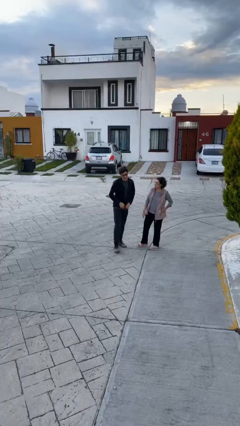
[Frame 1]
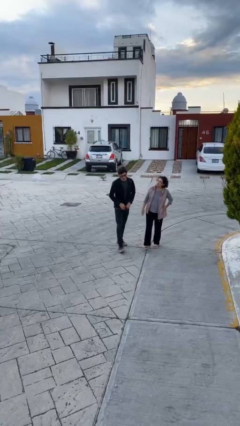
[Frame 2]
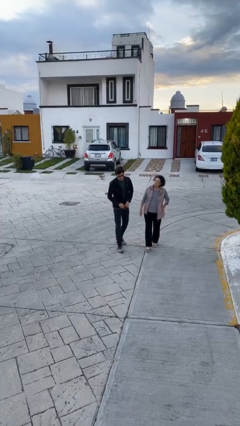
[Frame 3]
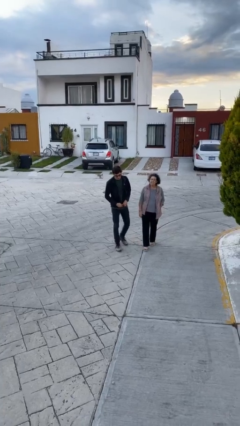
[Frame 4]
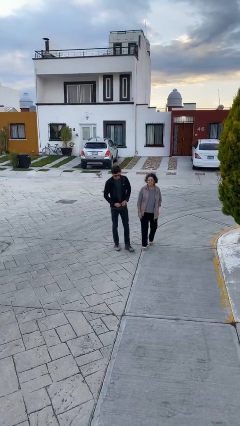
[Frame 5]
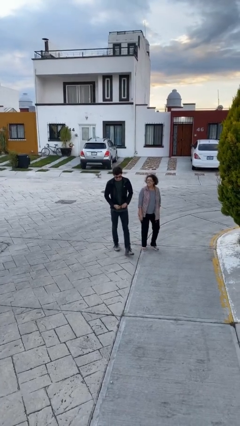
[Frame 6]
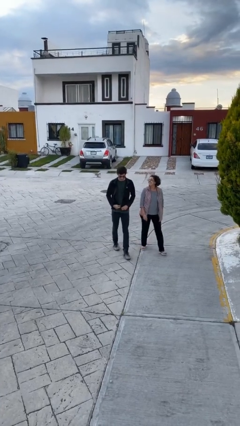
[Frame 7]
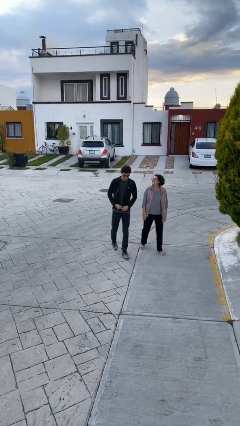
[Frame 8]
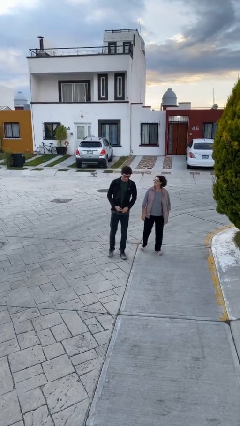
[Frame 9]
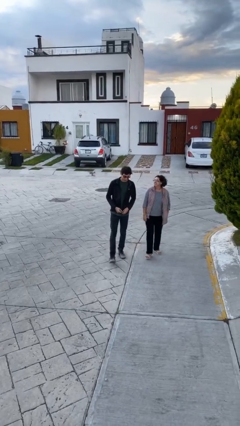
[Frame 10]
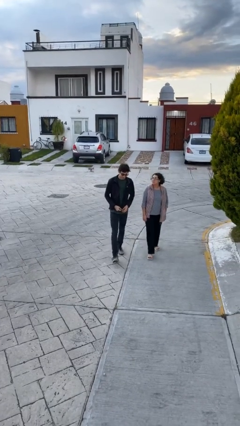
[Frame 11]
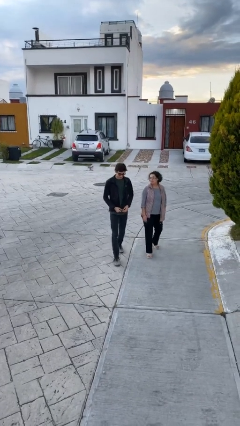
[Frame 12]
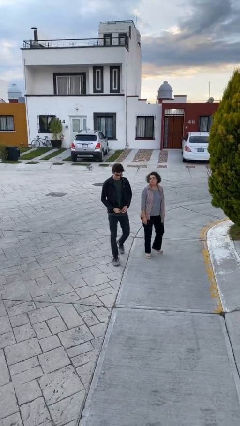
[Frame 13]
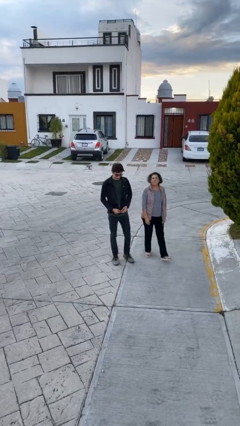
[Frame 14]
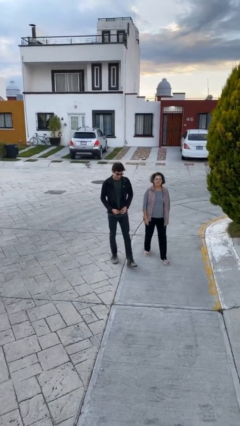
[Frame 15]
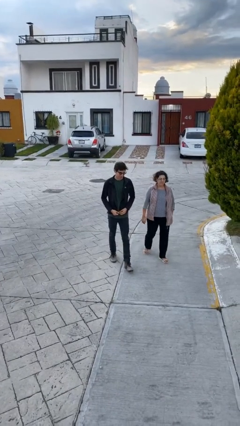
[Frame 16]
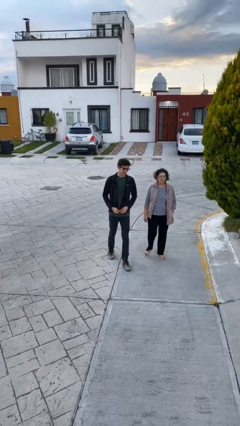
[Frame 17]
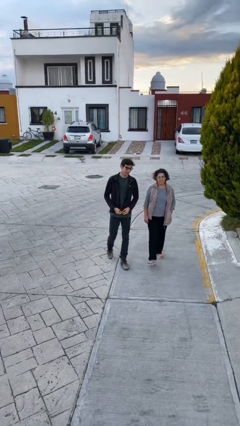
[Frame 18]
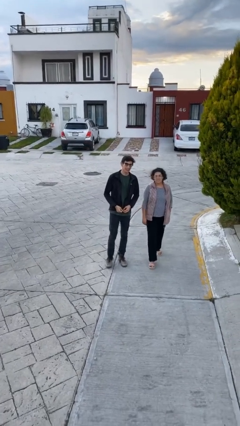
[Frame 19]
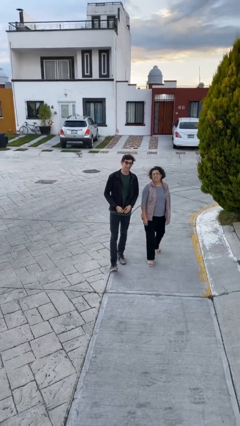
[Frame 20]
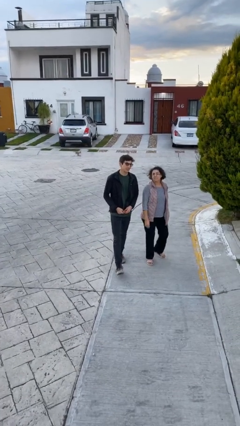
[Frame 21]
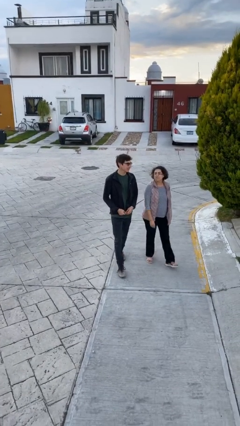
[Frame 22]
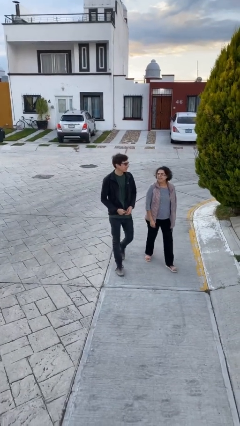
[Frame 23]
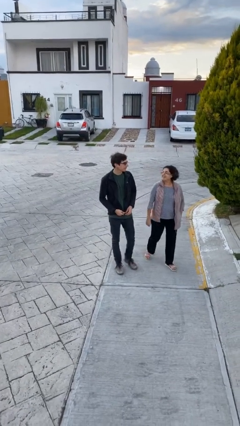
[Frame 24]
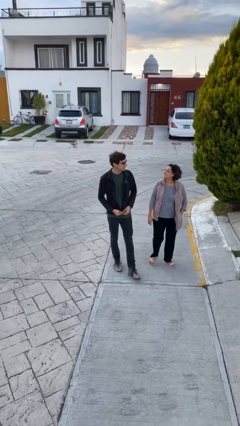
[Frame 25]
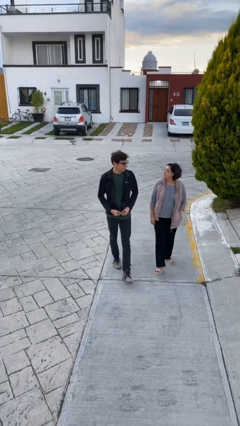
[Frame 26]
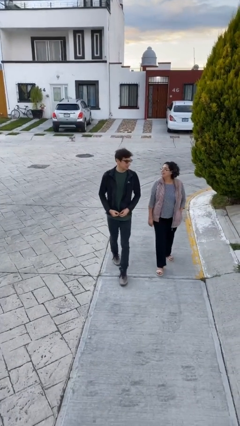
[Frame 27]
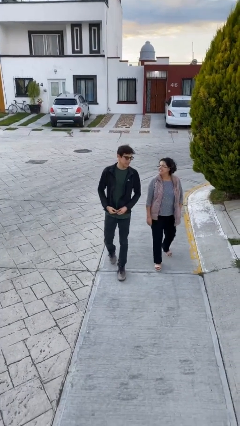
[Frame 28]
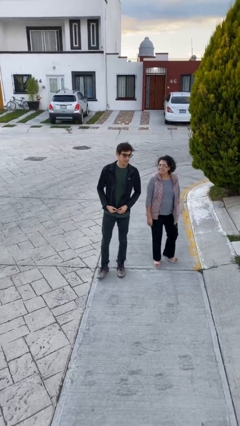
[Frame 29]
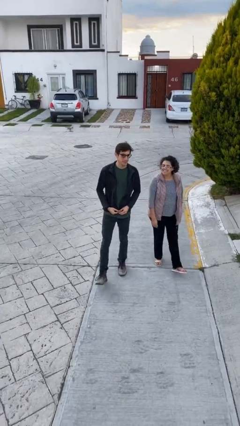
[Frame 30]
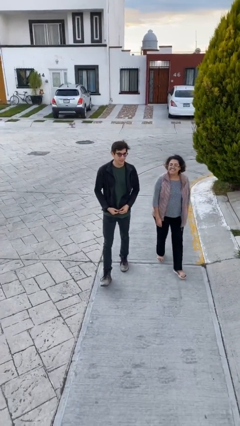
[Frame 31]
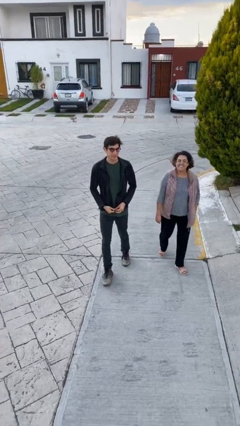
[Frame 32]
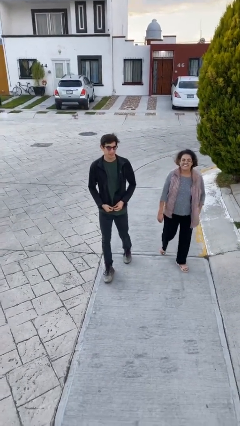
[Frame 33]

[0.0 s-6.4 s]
person talks to person

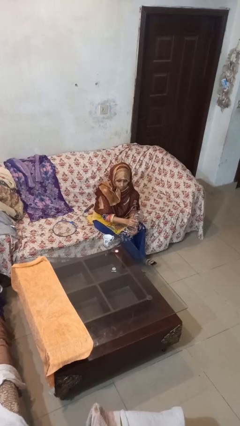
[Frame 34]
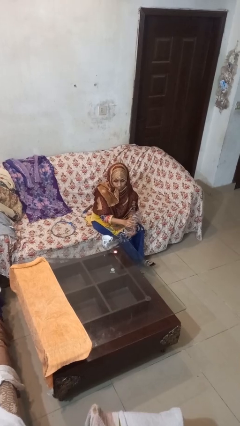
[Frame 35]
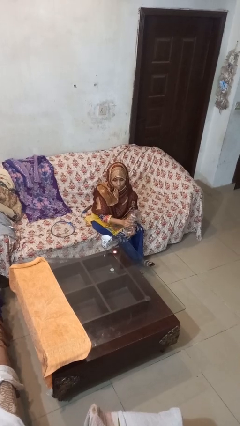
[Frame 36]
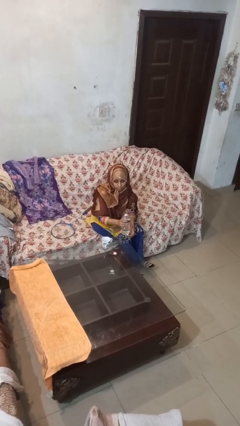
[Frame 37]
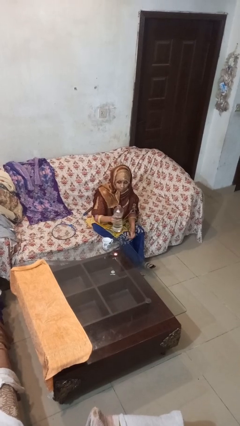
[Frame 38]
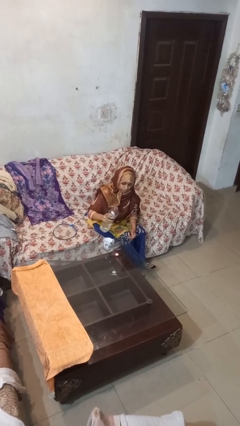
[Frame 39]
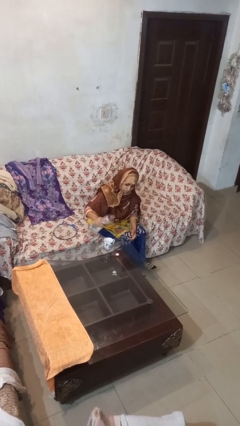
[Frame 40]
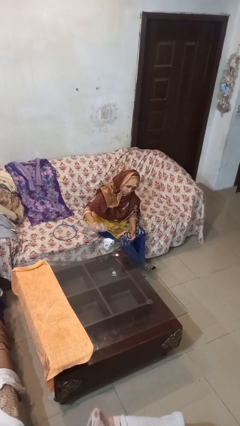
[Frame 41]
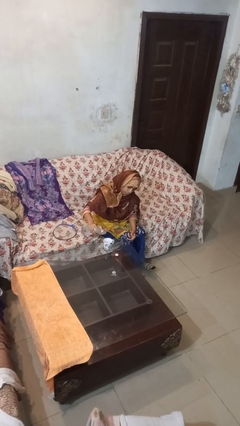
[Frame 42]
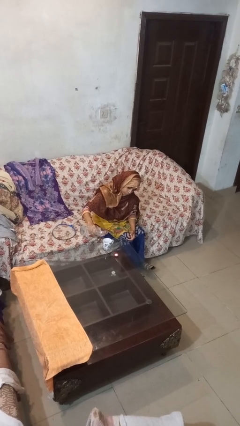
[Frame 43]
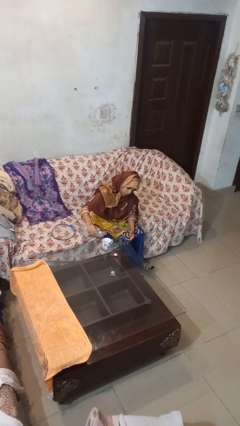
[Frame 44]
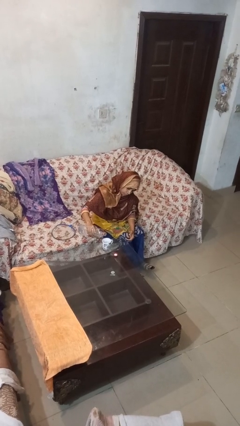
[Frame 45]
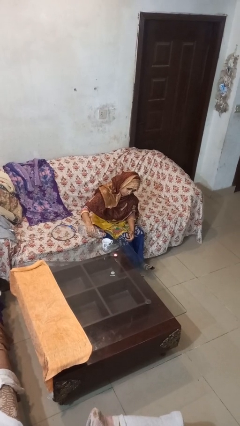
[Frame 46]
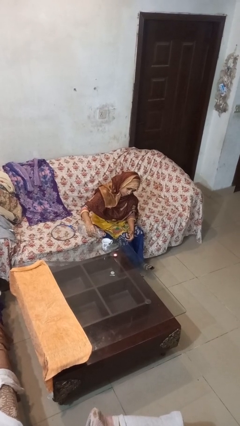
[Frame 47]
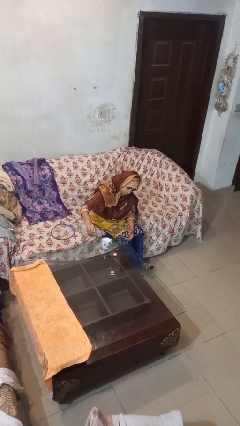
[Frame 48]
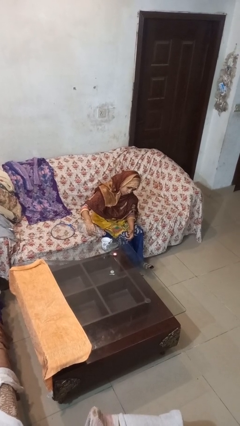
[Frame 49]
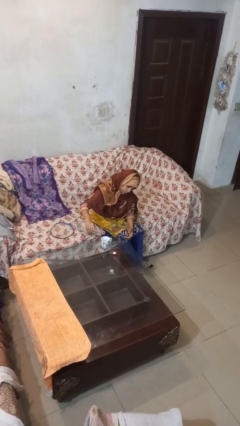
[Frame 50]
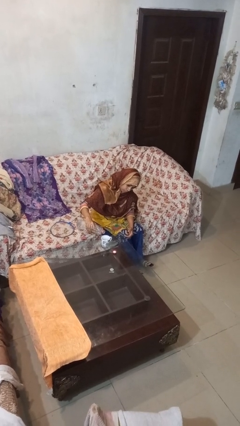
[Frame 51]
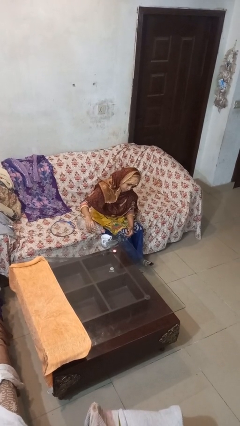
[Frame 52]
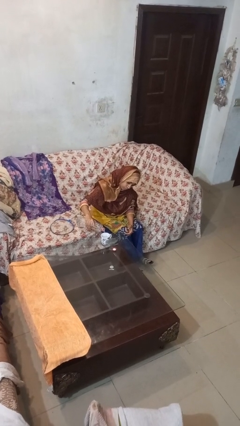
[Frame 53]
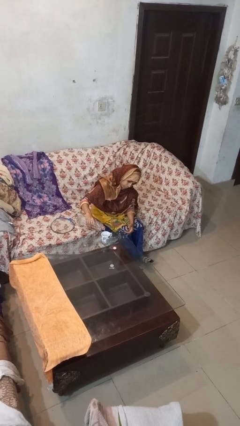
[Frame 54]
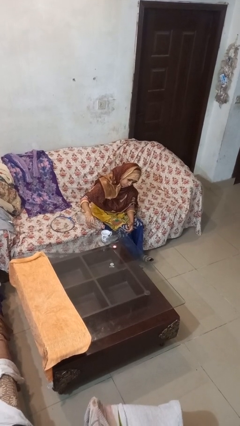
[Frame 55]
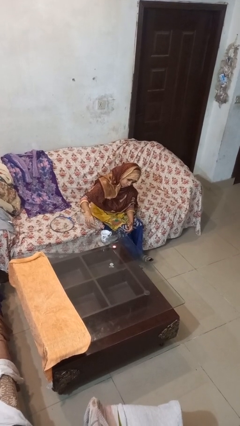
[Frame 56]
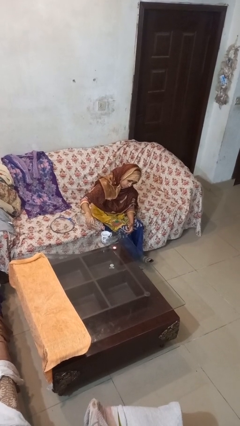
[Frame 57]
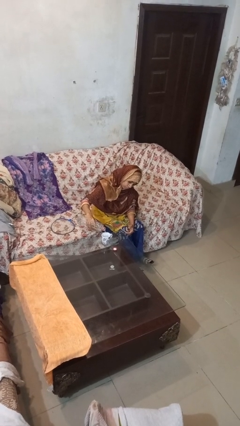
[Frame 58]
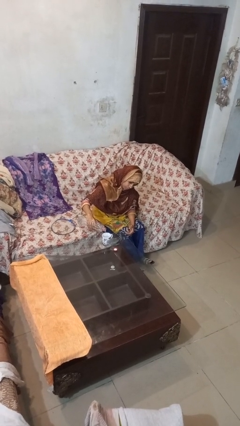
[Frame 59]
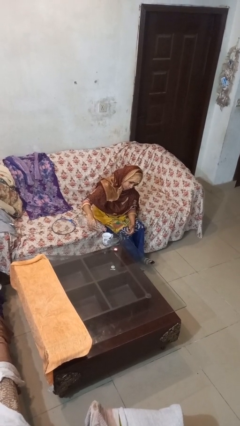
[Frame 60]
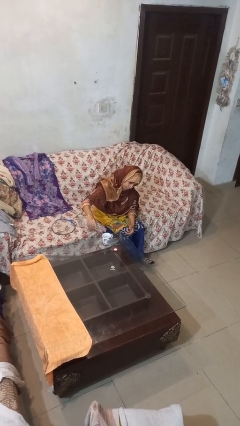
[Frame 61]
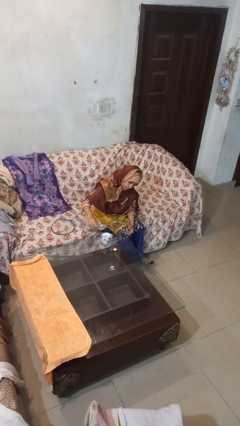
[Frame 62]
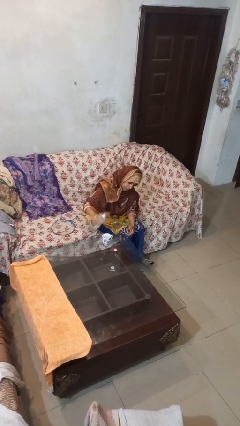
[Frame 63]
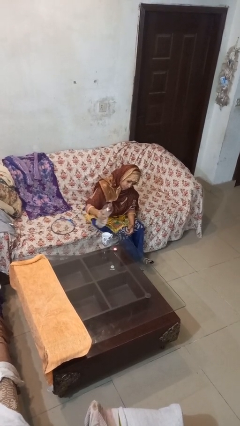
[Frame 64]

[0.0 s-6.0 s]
person pours liquid into cup

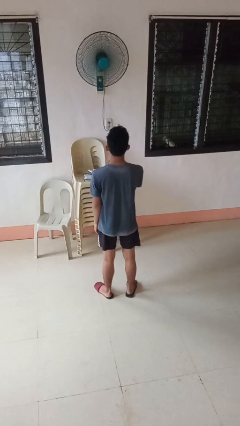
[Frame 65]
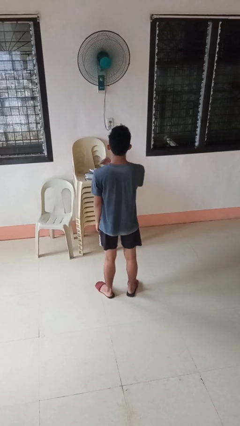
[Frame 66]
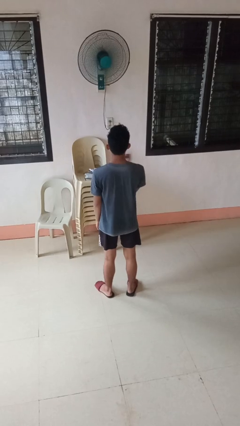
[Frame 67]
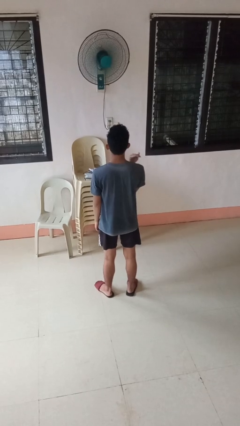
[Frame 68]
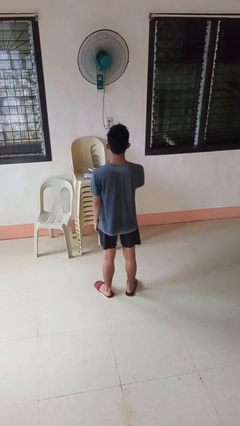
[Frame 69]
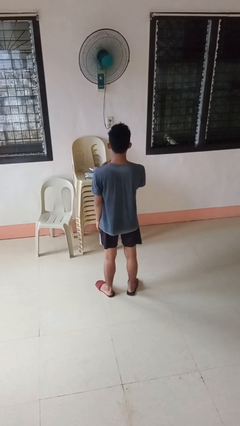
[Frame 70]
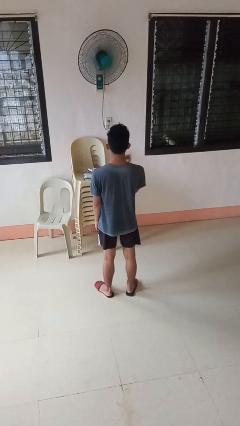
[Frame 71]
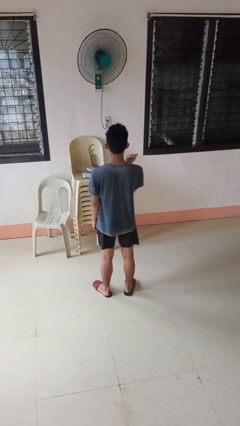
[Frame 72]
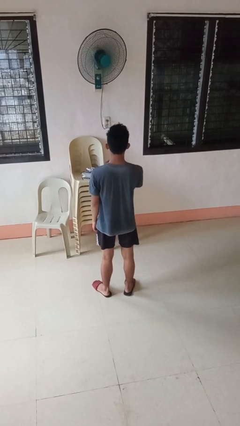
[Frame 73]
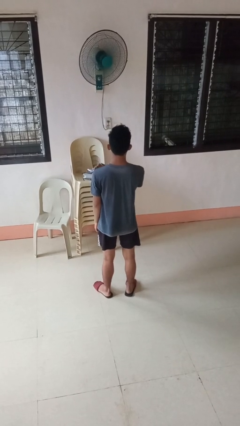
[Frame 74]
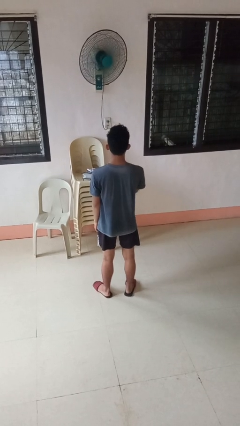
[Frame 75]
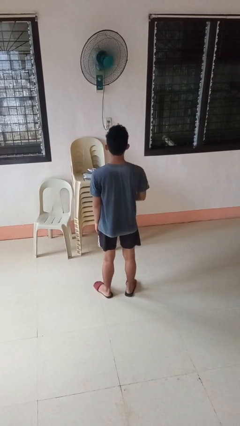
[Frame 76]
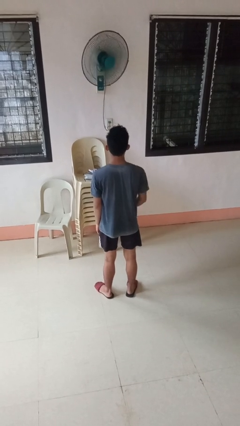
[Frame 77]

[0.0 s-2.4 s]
person gestures cut

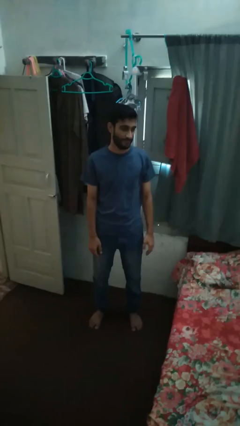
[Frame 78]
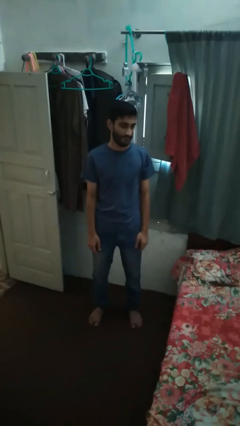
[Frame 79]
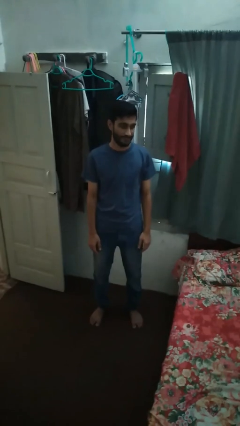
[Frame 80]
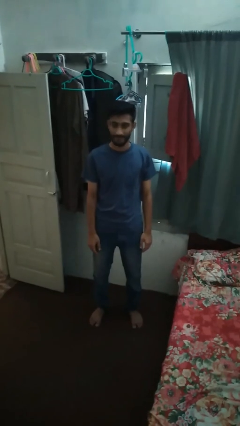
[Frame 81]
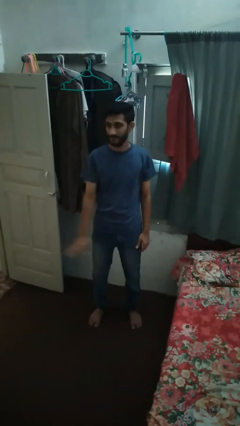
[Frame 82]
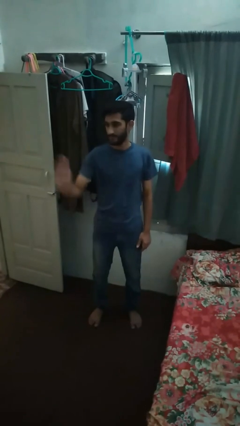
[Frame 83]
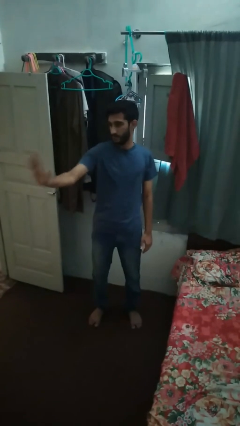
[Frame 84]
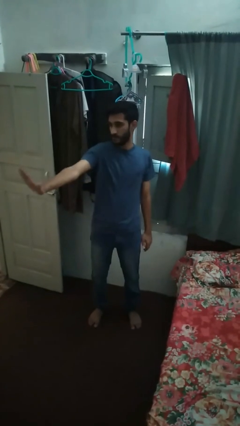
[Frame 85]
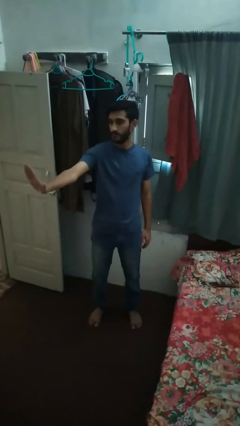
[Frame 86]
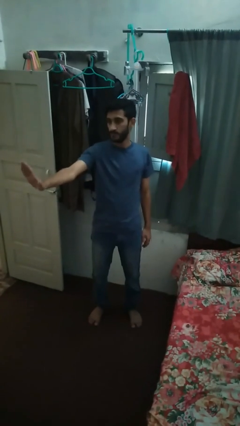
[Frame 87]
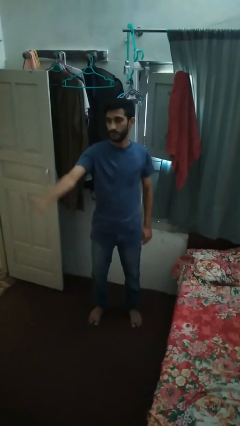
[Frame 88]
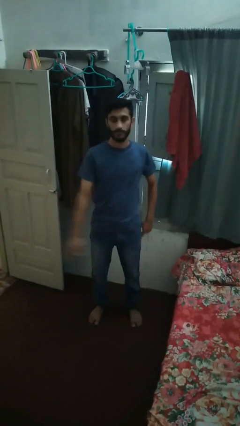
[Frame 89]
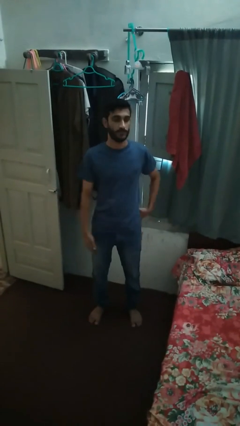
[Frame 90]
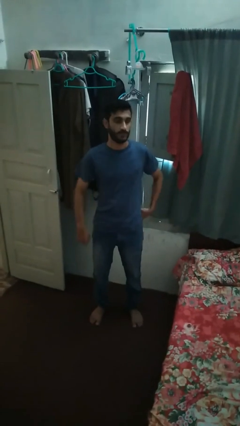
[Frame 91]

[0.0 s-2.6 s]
person gestures stop

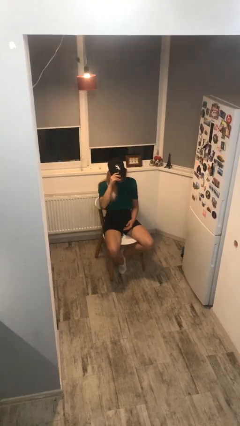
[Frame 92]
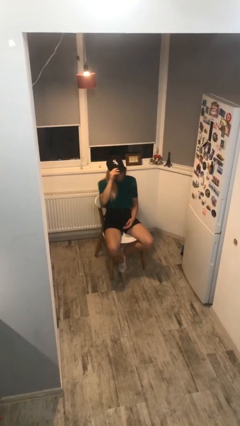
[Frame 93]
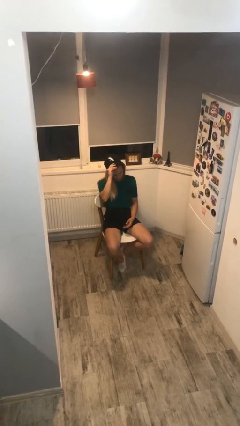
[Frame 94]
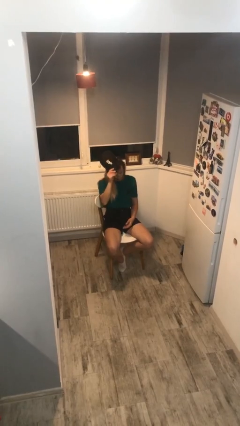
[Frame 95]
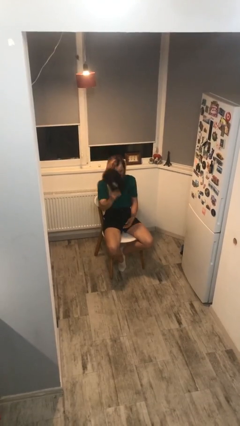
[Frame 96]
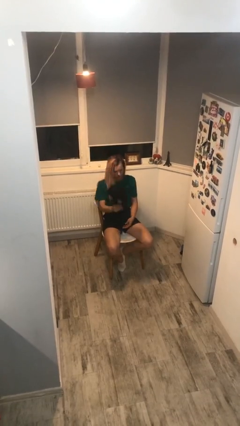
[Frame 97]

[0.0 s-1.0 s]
person takes off hat
